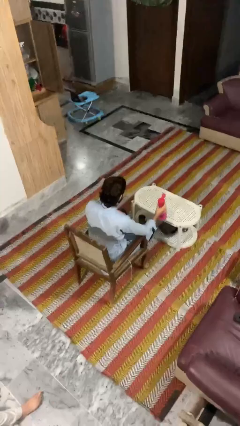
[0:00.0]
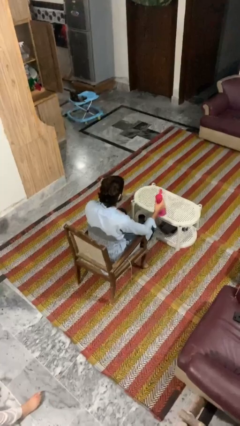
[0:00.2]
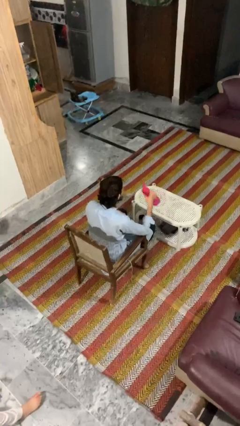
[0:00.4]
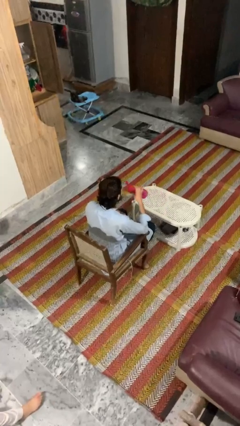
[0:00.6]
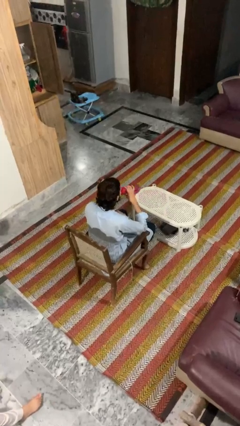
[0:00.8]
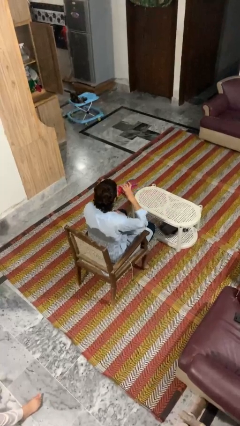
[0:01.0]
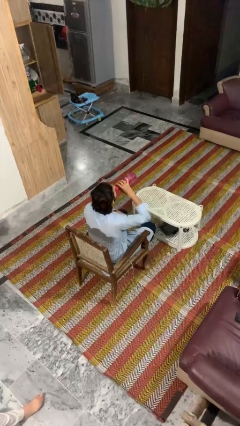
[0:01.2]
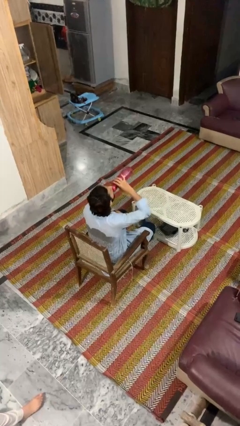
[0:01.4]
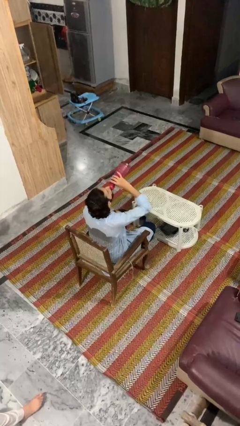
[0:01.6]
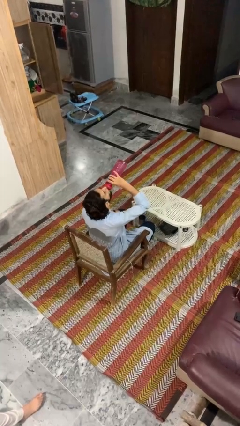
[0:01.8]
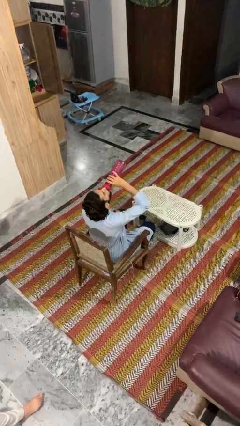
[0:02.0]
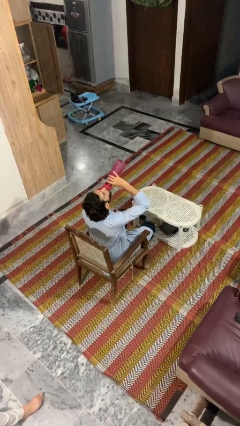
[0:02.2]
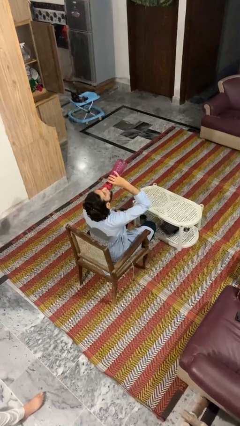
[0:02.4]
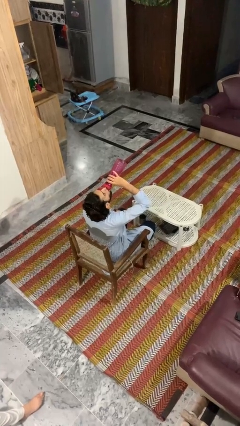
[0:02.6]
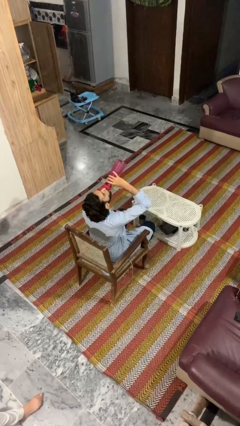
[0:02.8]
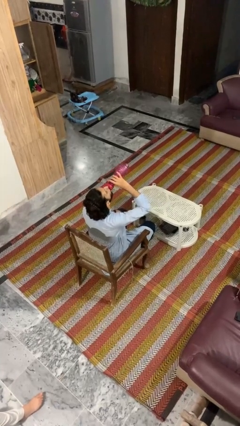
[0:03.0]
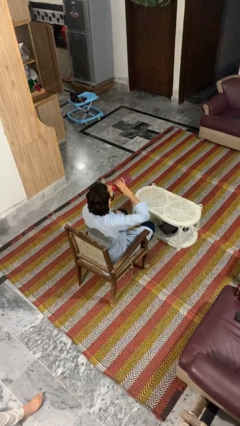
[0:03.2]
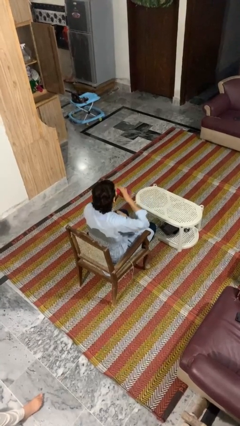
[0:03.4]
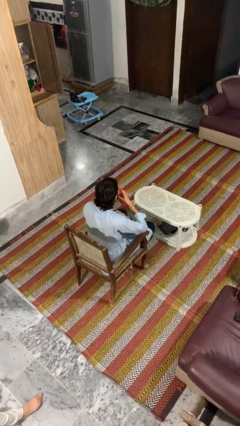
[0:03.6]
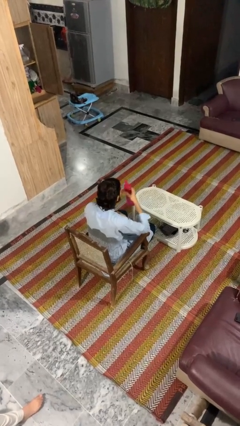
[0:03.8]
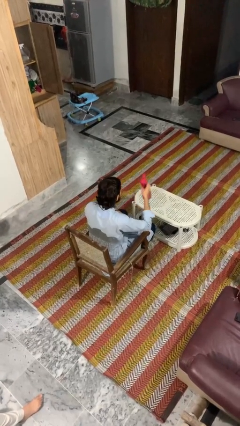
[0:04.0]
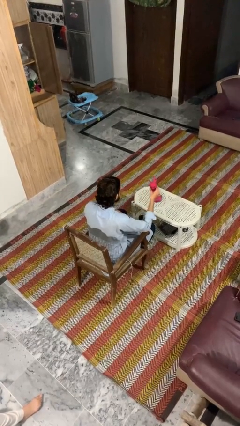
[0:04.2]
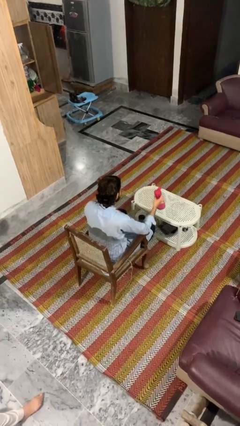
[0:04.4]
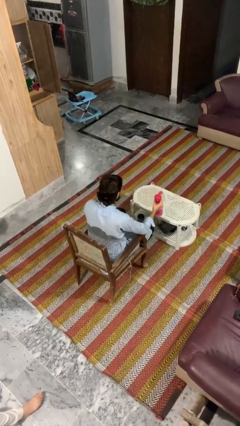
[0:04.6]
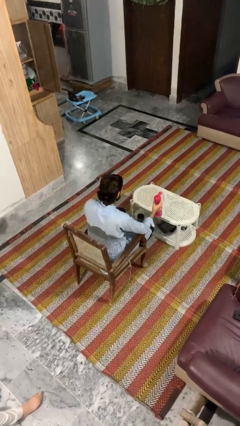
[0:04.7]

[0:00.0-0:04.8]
person drinks from bottle

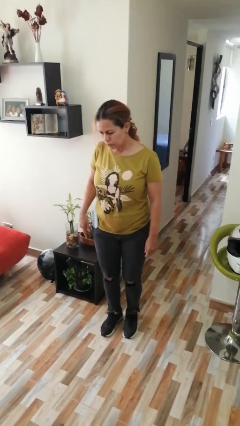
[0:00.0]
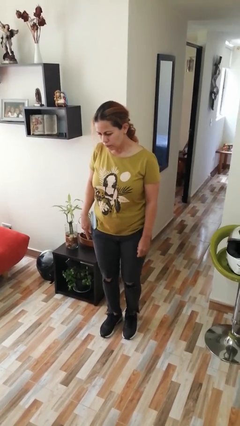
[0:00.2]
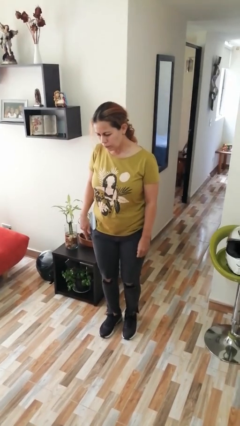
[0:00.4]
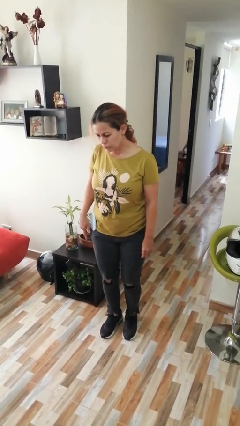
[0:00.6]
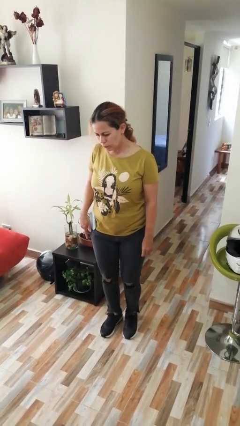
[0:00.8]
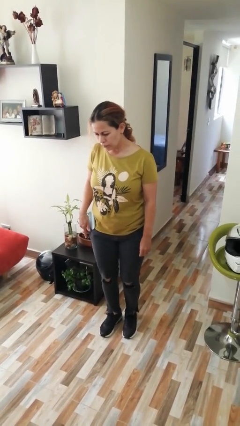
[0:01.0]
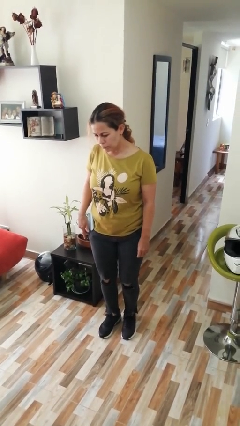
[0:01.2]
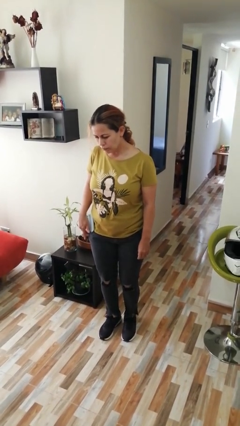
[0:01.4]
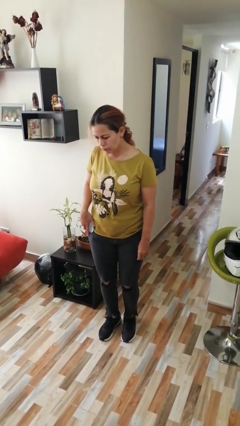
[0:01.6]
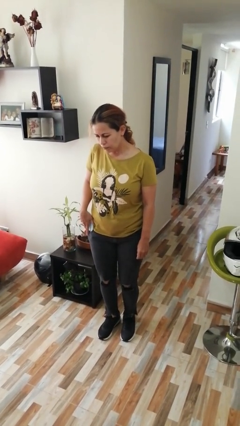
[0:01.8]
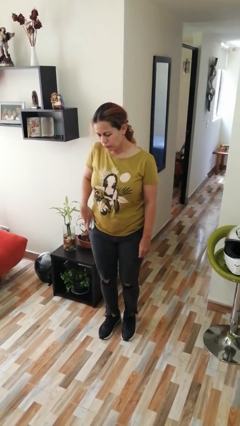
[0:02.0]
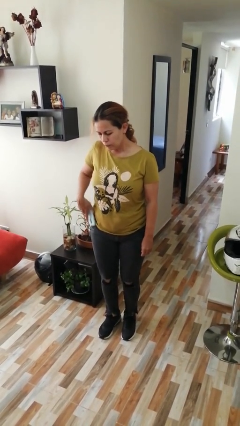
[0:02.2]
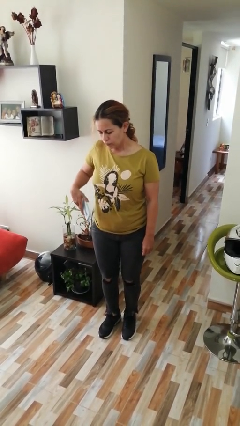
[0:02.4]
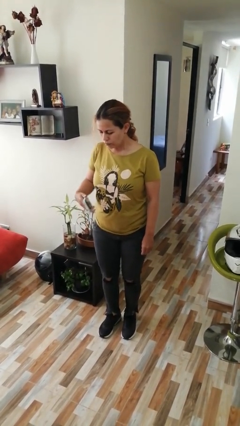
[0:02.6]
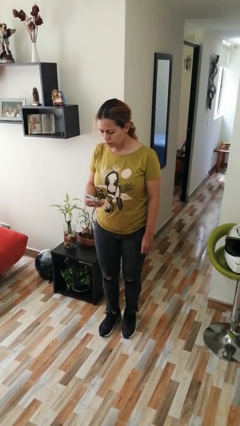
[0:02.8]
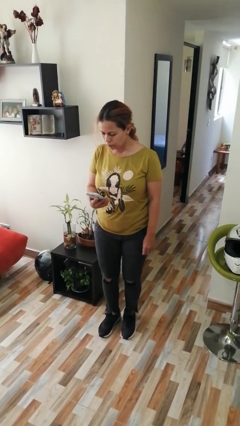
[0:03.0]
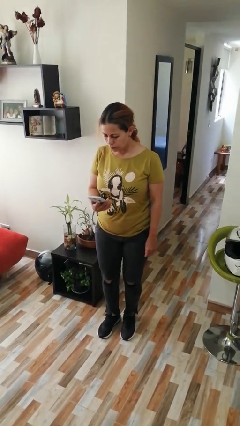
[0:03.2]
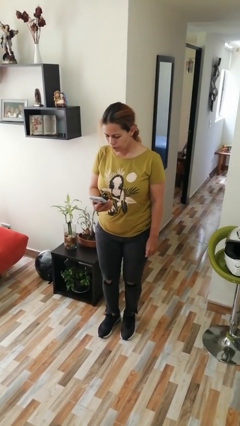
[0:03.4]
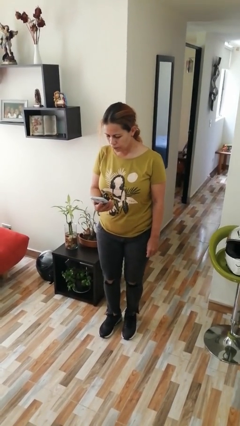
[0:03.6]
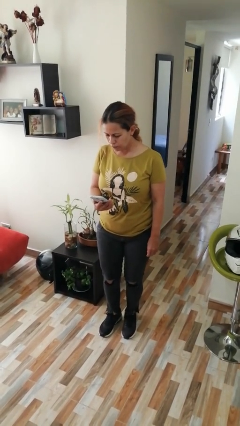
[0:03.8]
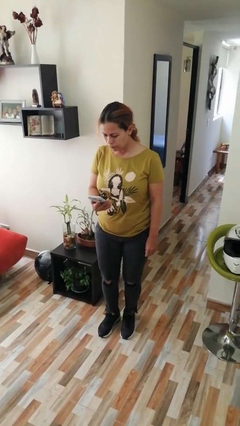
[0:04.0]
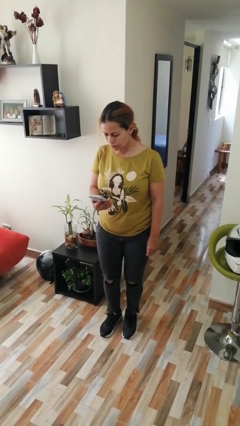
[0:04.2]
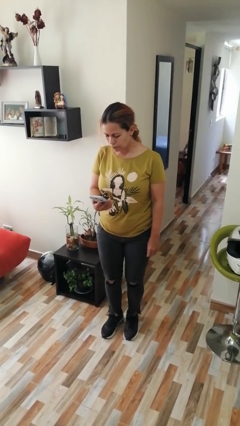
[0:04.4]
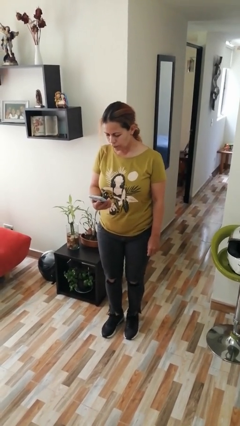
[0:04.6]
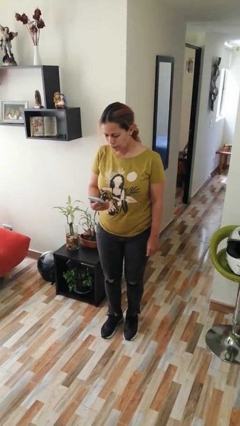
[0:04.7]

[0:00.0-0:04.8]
person puts phone into pocket

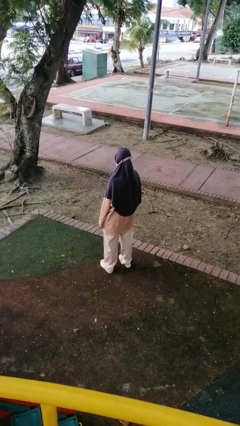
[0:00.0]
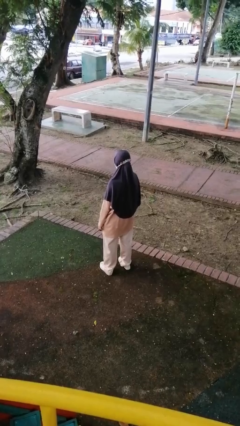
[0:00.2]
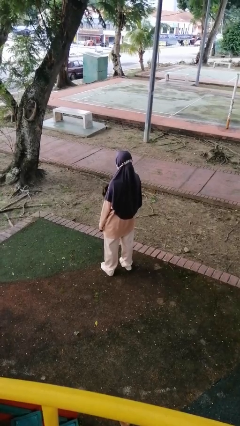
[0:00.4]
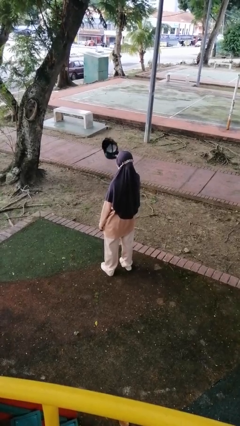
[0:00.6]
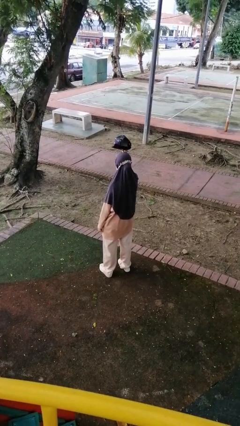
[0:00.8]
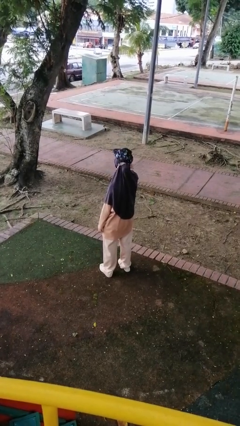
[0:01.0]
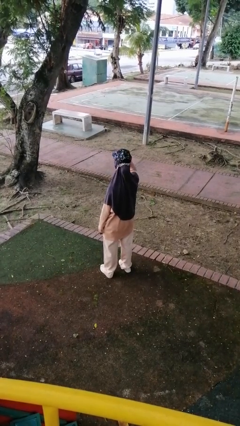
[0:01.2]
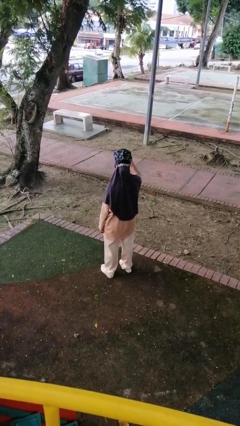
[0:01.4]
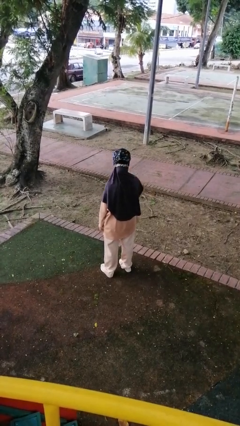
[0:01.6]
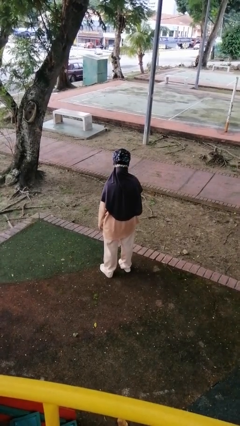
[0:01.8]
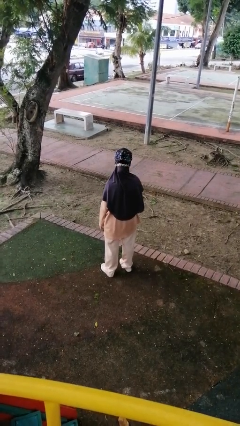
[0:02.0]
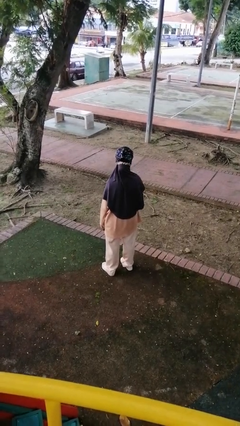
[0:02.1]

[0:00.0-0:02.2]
person puts on hat

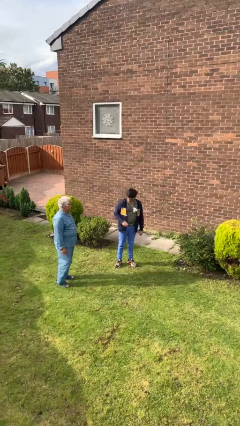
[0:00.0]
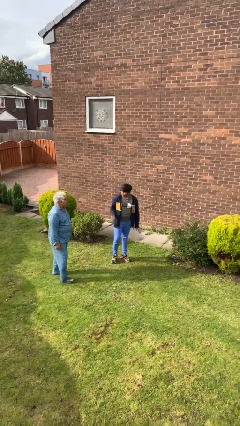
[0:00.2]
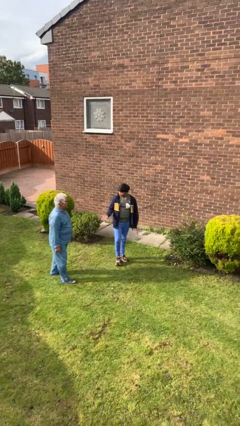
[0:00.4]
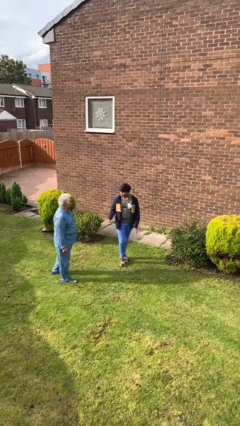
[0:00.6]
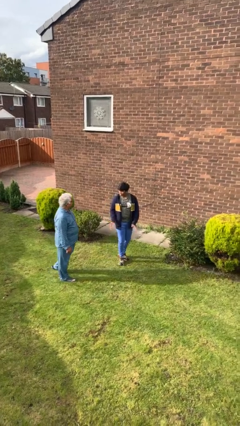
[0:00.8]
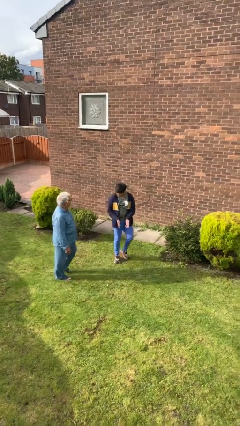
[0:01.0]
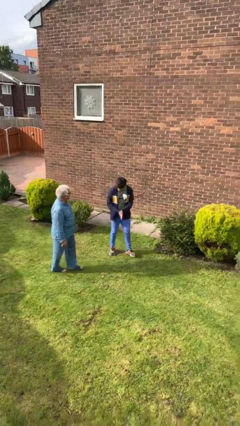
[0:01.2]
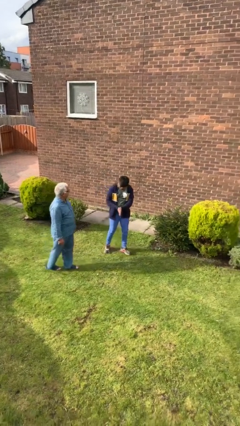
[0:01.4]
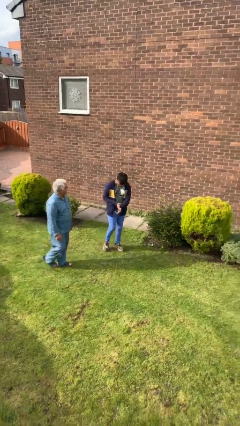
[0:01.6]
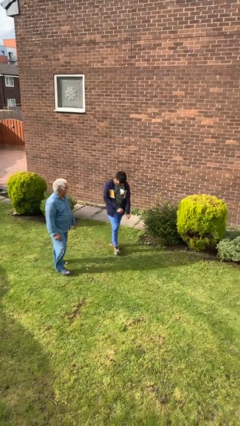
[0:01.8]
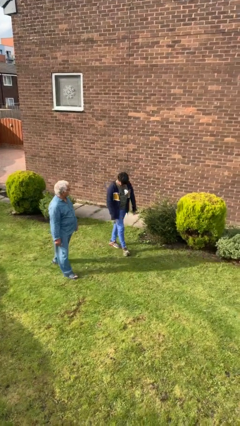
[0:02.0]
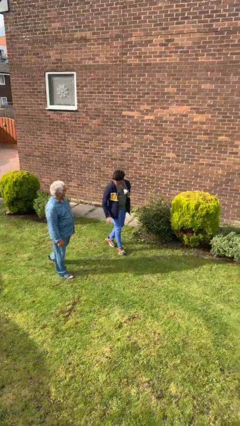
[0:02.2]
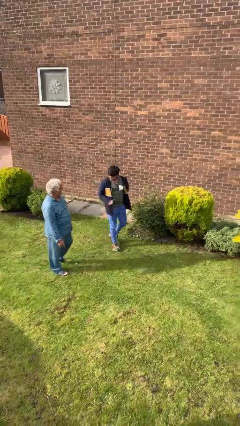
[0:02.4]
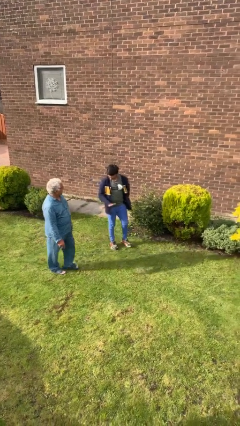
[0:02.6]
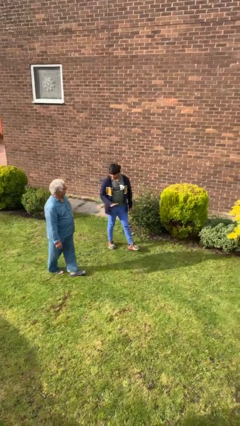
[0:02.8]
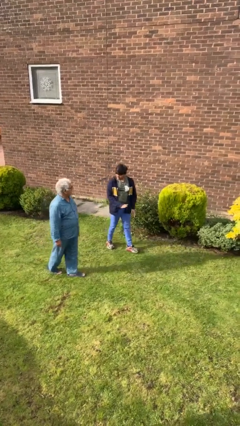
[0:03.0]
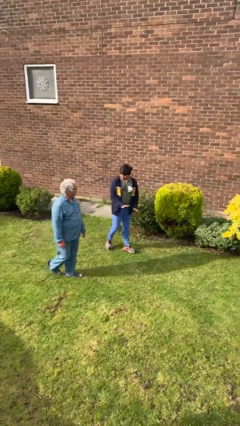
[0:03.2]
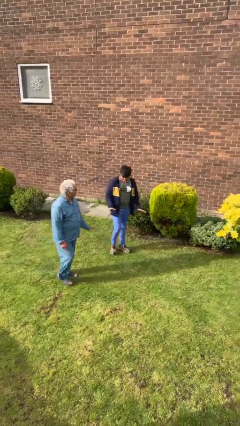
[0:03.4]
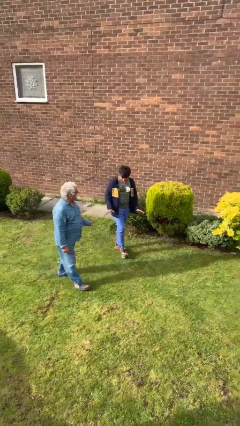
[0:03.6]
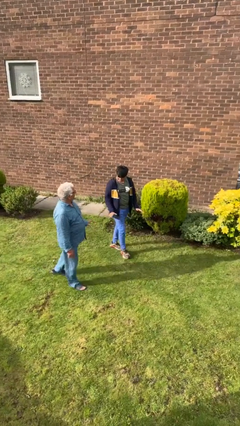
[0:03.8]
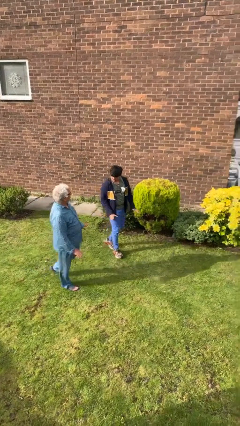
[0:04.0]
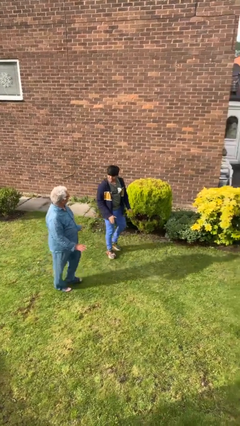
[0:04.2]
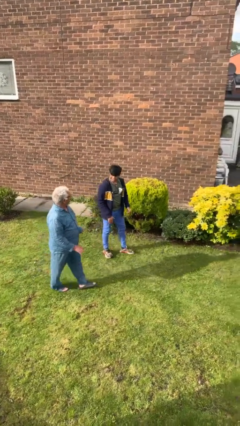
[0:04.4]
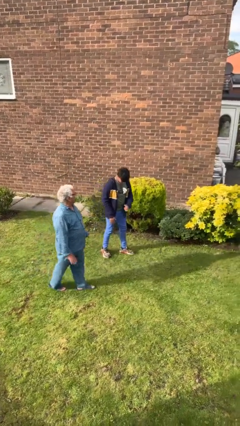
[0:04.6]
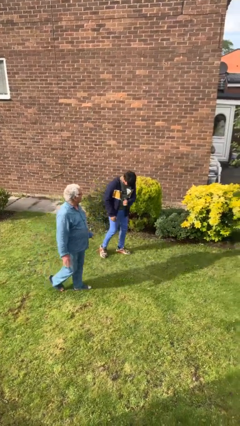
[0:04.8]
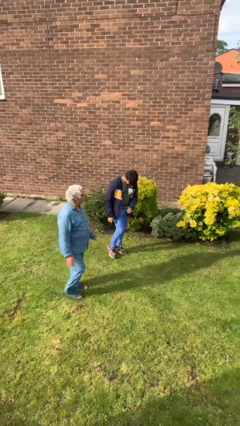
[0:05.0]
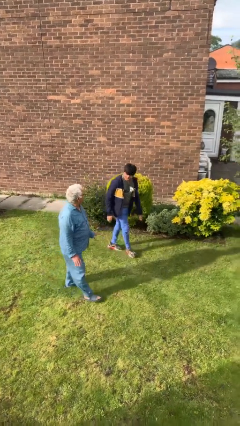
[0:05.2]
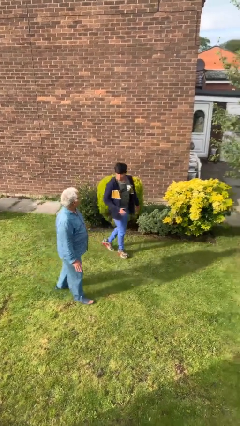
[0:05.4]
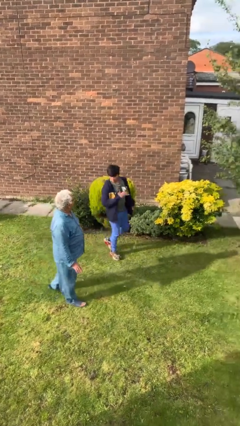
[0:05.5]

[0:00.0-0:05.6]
person talks to person

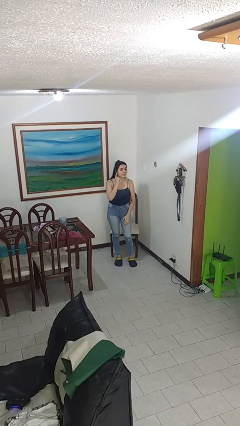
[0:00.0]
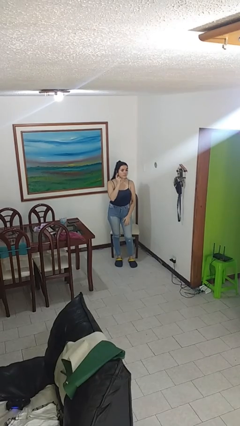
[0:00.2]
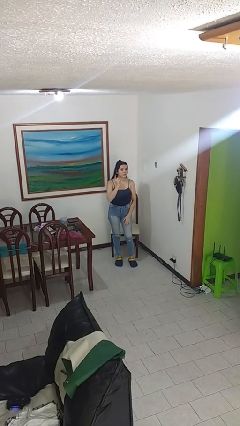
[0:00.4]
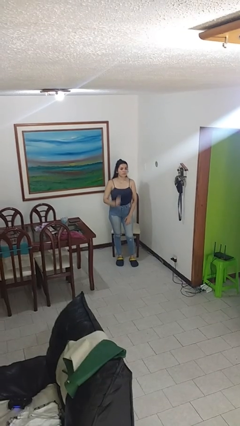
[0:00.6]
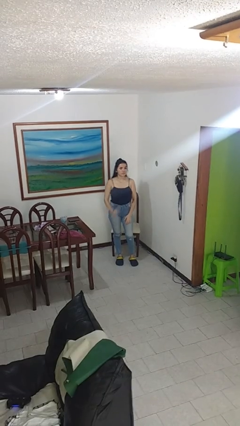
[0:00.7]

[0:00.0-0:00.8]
person gestures listen closely
